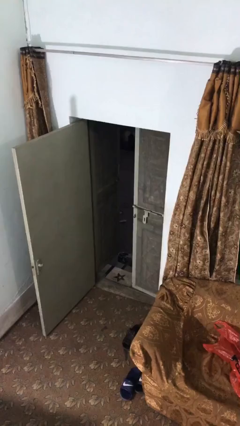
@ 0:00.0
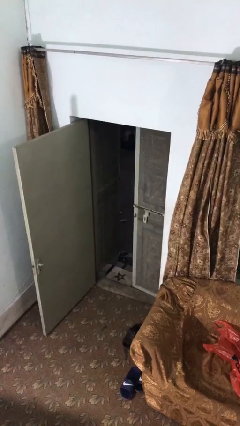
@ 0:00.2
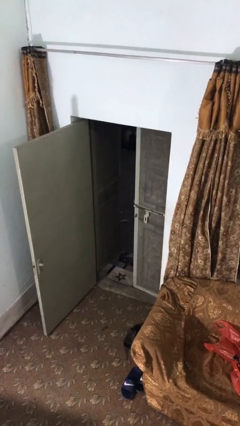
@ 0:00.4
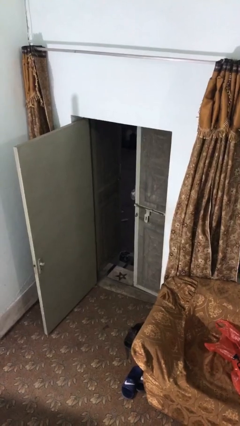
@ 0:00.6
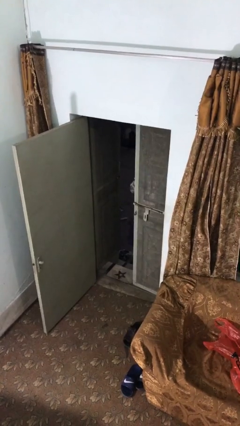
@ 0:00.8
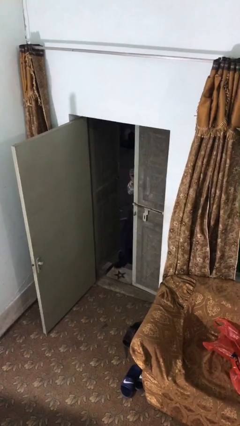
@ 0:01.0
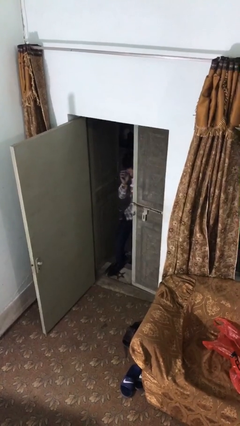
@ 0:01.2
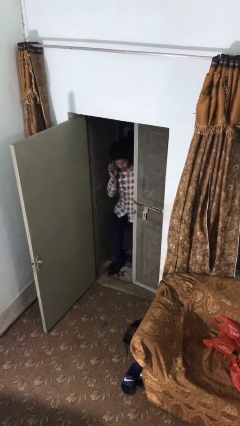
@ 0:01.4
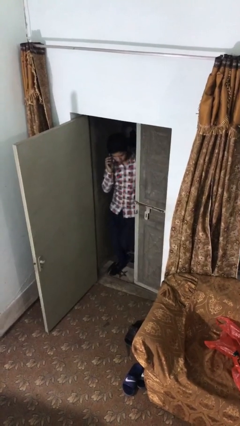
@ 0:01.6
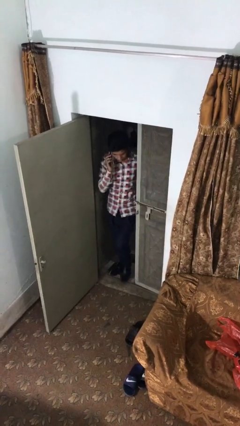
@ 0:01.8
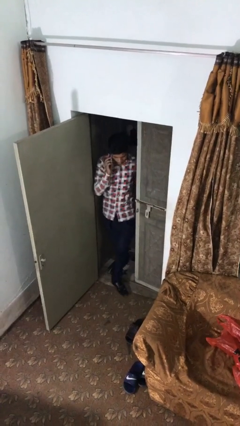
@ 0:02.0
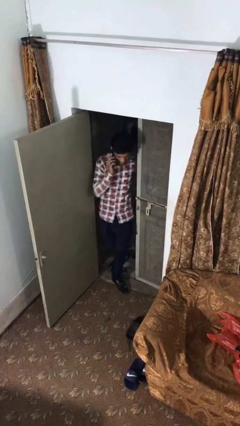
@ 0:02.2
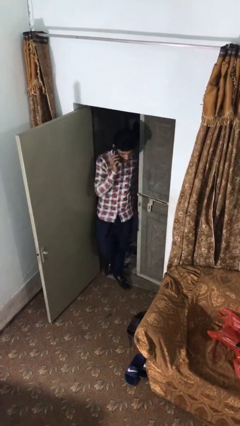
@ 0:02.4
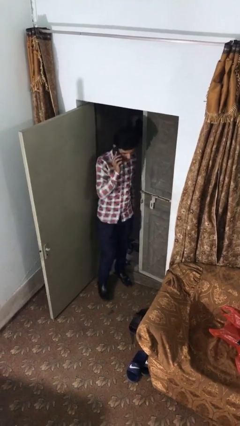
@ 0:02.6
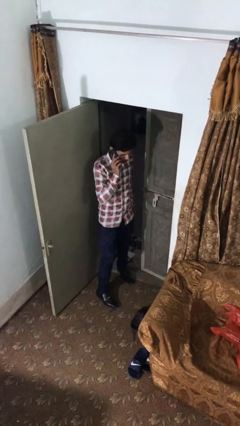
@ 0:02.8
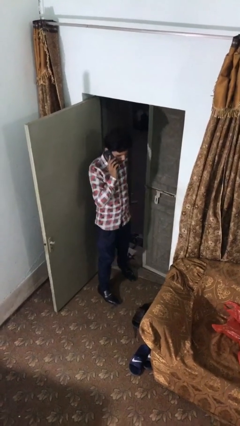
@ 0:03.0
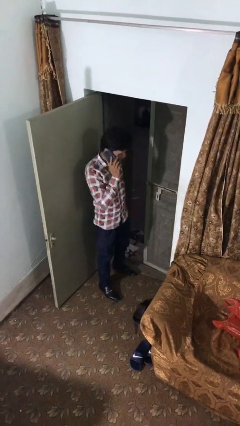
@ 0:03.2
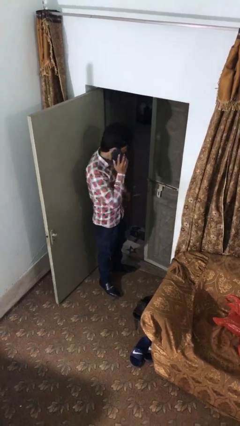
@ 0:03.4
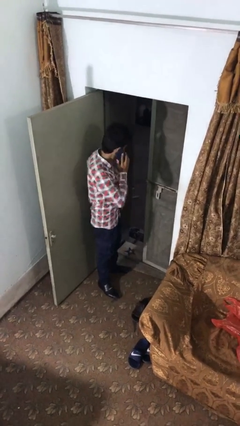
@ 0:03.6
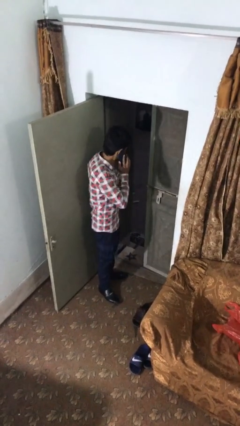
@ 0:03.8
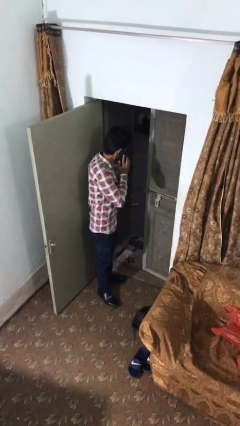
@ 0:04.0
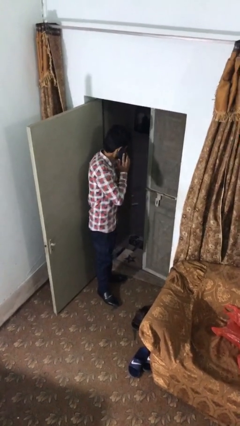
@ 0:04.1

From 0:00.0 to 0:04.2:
person enters scene through structure

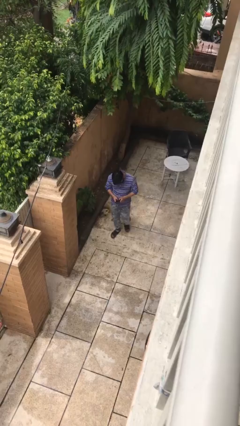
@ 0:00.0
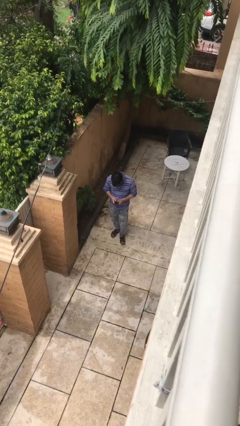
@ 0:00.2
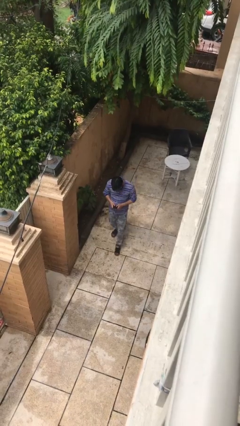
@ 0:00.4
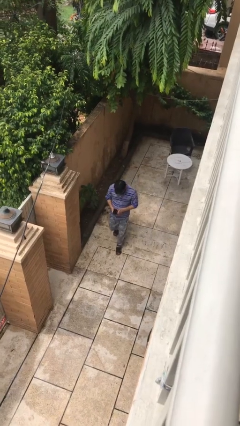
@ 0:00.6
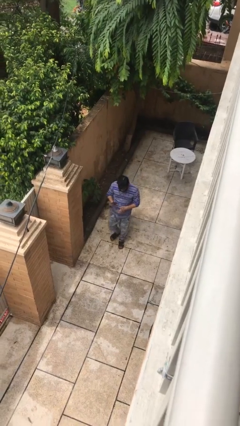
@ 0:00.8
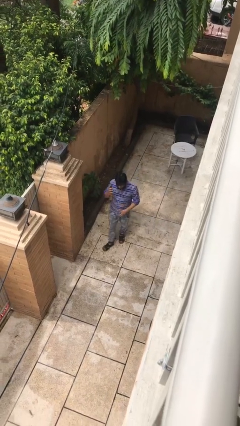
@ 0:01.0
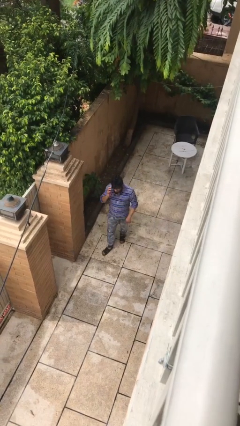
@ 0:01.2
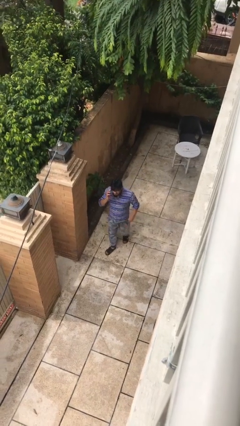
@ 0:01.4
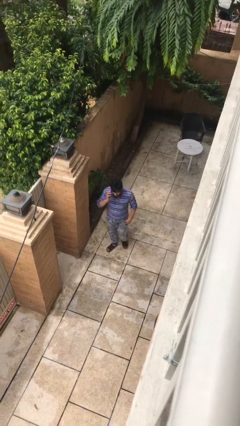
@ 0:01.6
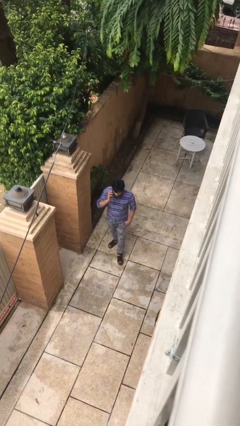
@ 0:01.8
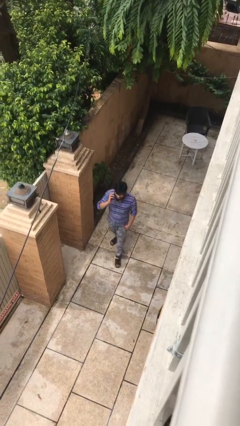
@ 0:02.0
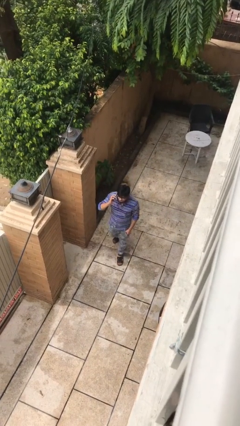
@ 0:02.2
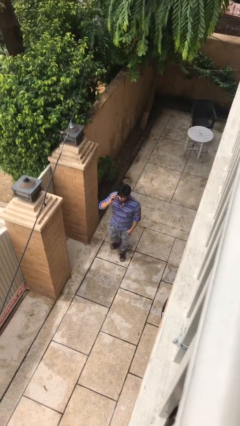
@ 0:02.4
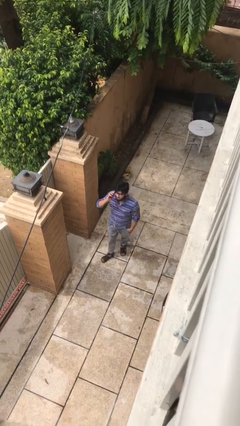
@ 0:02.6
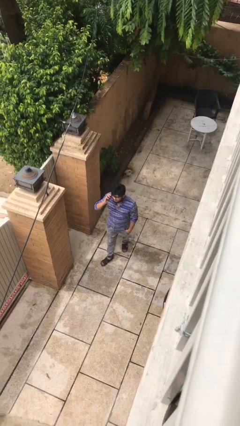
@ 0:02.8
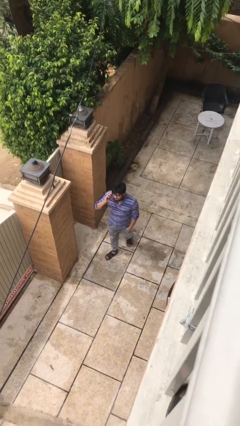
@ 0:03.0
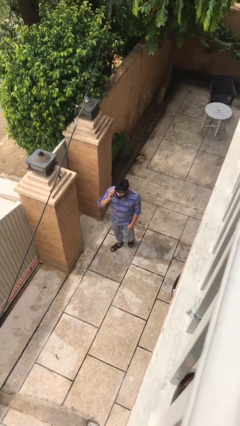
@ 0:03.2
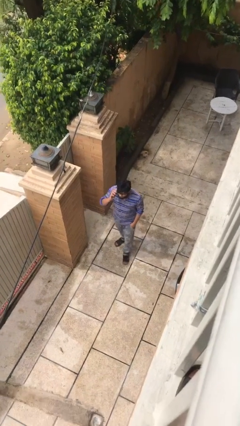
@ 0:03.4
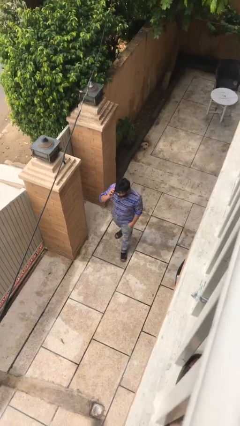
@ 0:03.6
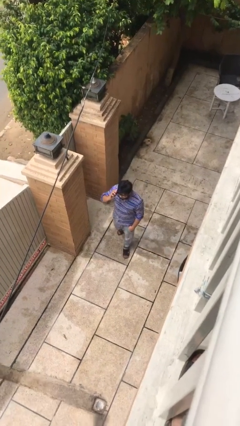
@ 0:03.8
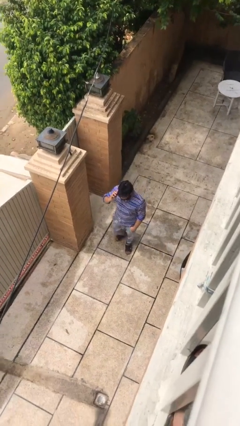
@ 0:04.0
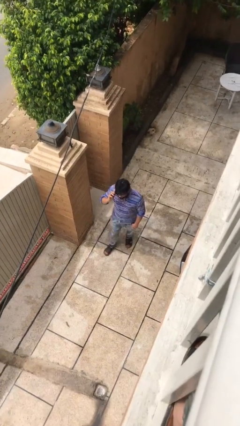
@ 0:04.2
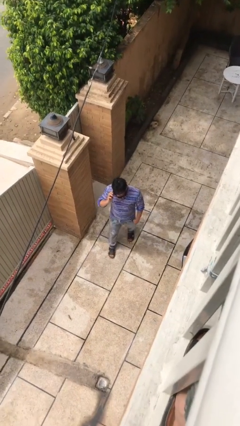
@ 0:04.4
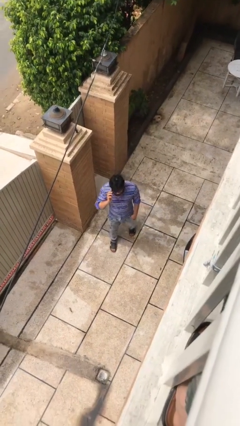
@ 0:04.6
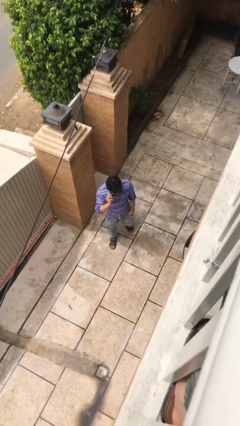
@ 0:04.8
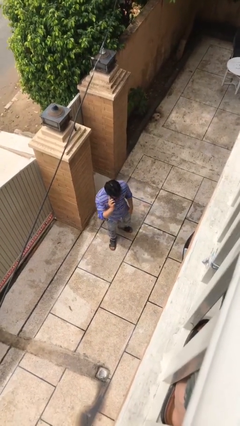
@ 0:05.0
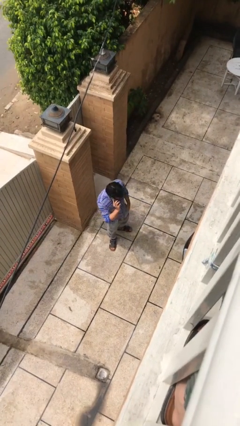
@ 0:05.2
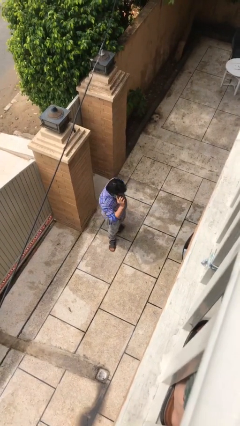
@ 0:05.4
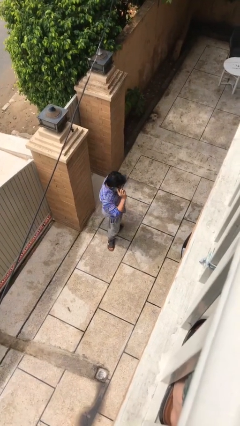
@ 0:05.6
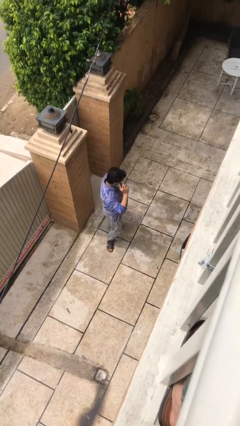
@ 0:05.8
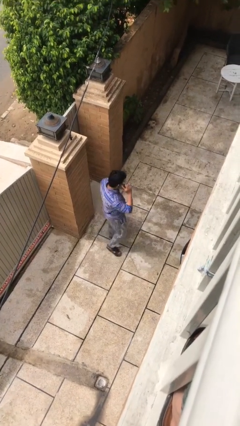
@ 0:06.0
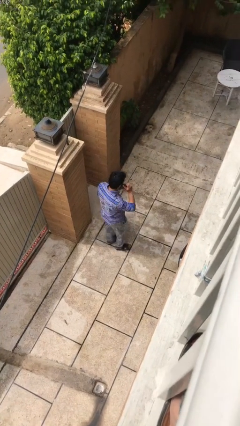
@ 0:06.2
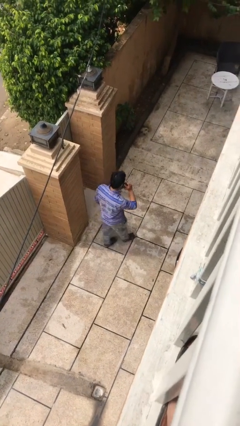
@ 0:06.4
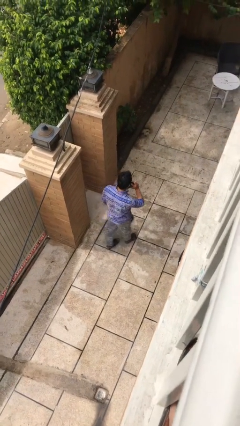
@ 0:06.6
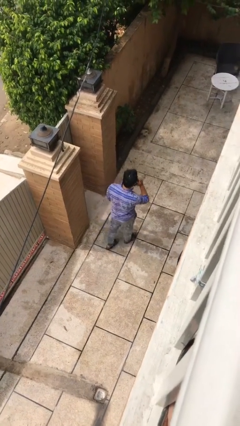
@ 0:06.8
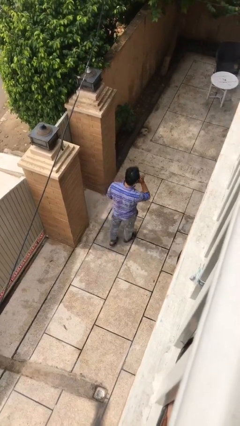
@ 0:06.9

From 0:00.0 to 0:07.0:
person talks on phone

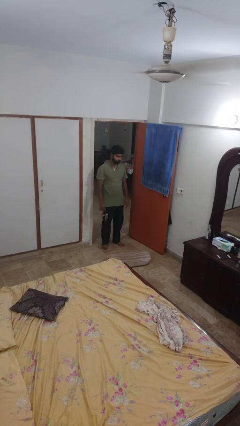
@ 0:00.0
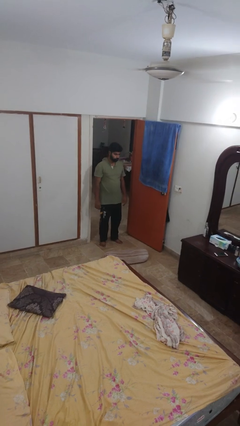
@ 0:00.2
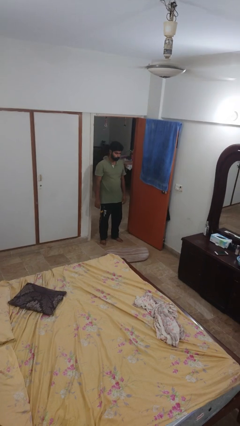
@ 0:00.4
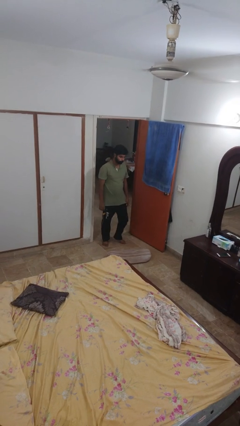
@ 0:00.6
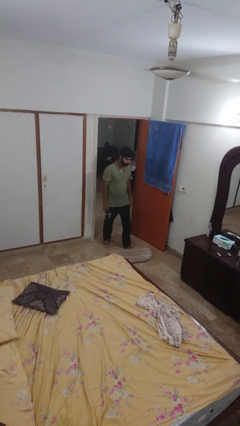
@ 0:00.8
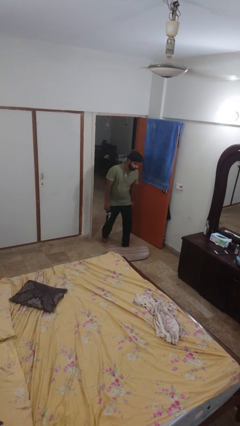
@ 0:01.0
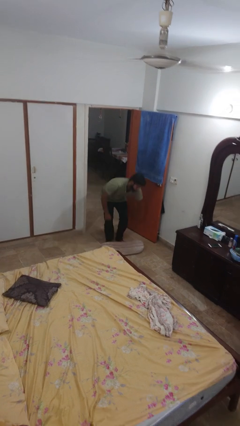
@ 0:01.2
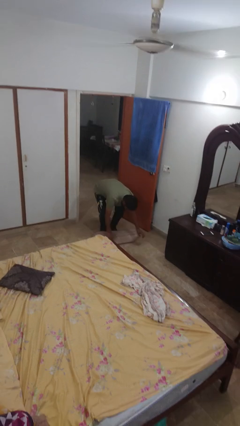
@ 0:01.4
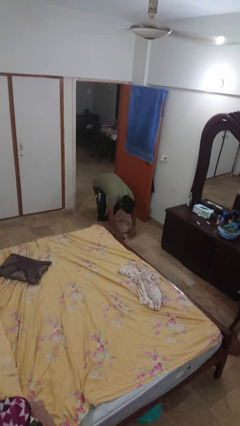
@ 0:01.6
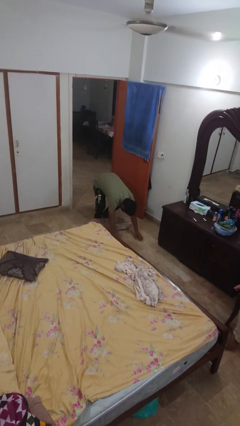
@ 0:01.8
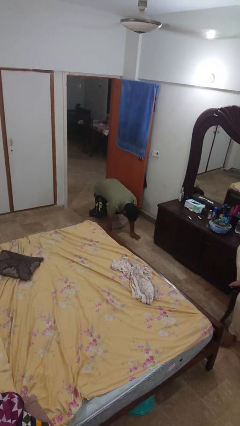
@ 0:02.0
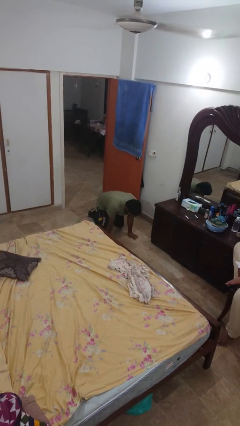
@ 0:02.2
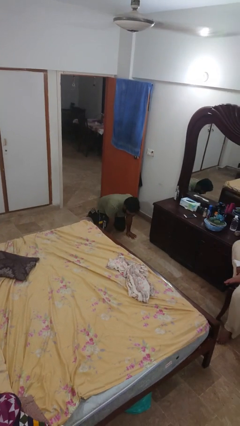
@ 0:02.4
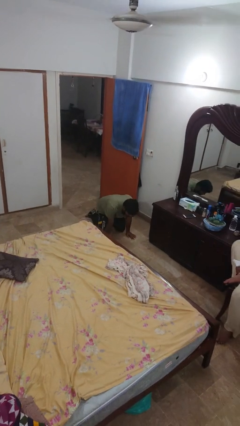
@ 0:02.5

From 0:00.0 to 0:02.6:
person trips on object on floor

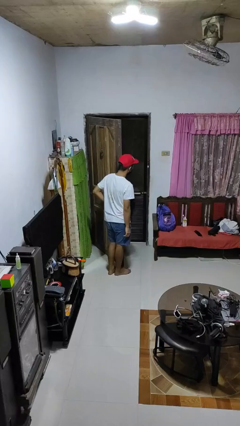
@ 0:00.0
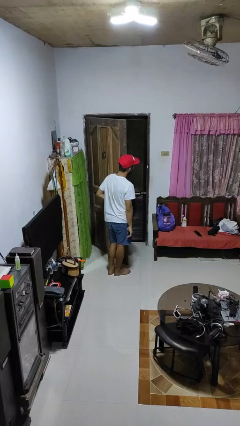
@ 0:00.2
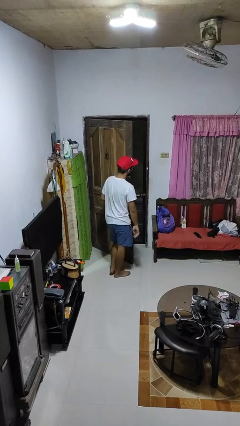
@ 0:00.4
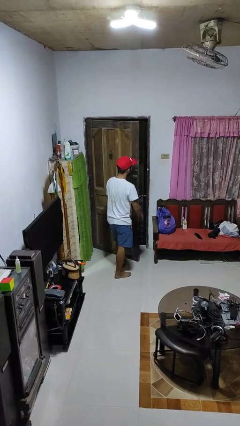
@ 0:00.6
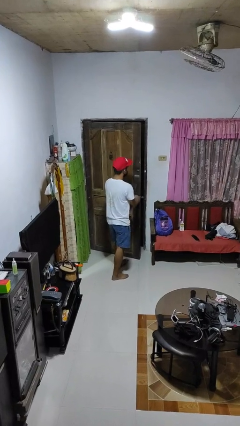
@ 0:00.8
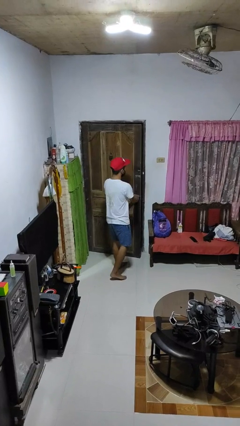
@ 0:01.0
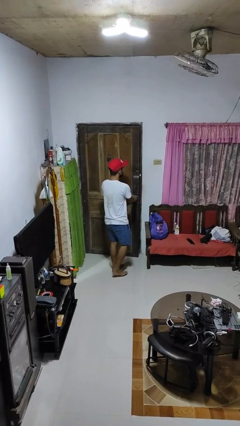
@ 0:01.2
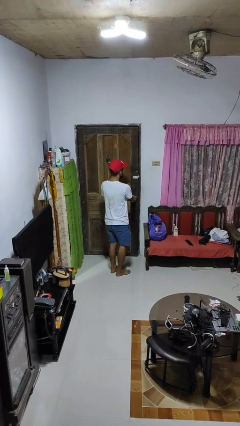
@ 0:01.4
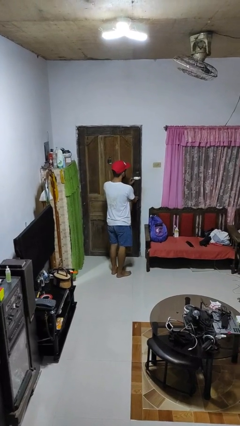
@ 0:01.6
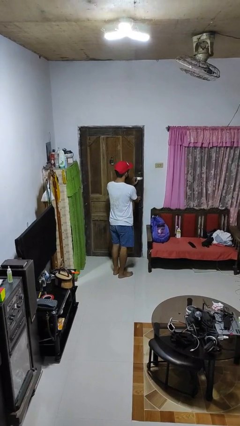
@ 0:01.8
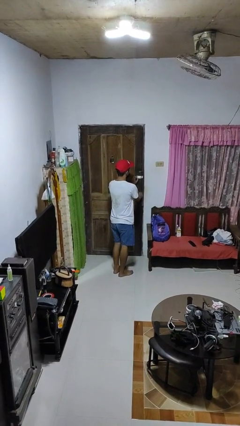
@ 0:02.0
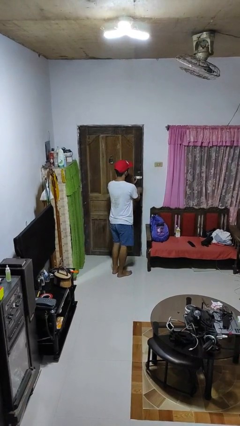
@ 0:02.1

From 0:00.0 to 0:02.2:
person closes facility door

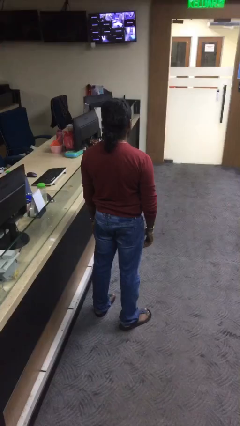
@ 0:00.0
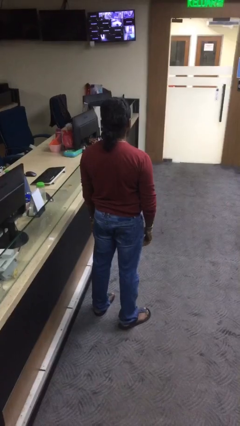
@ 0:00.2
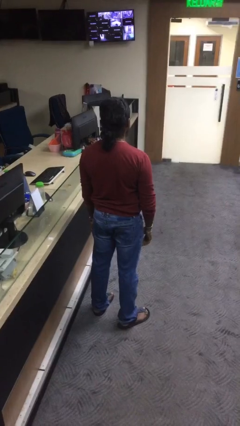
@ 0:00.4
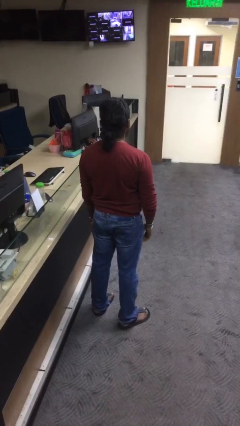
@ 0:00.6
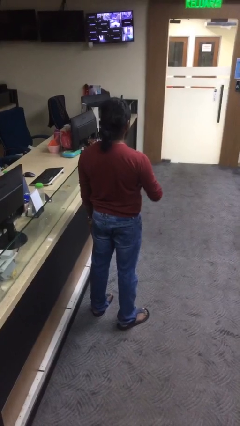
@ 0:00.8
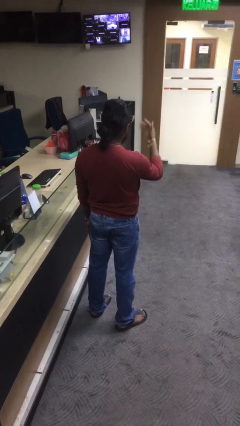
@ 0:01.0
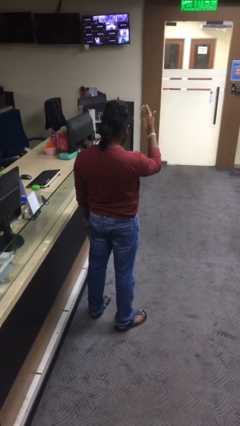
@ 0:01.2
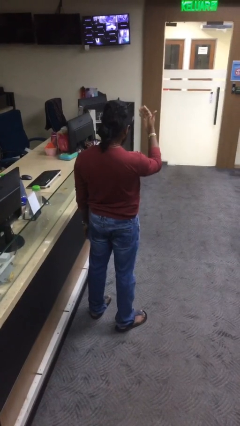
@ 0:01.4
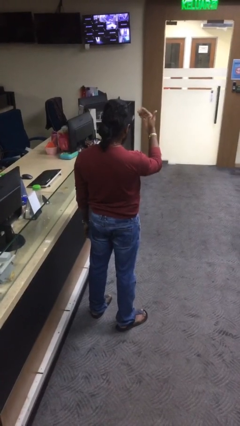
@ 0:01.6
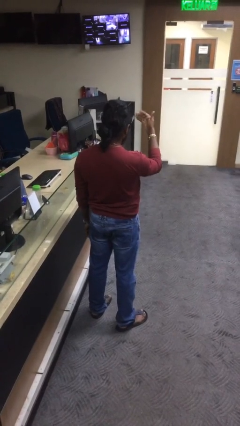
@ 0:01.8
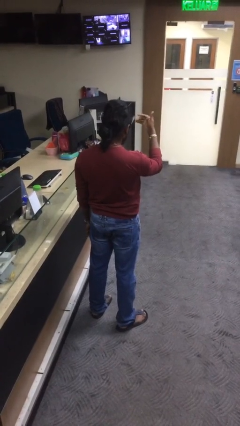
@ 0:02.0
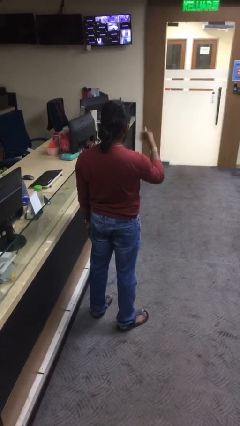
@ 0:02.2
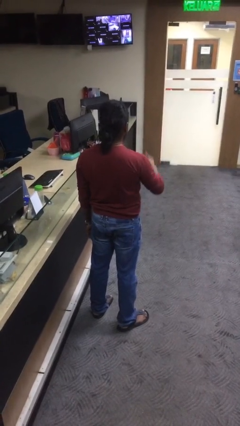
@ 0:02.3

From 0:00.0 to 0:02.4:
person gestures come here
